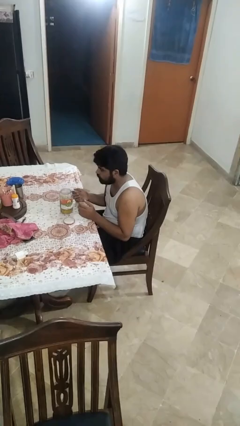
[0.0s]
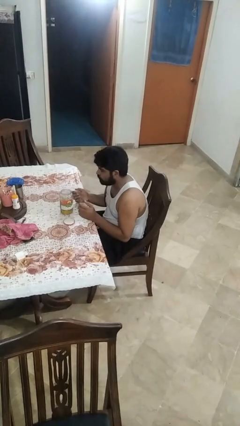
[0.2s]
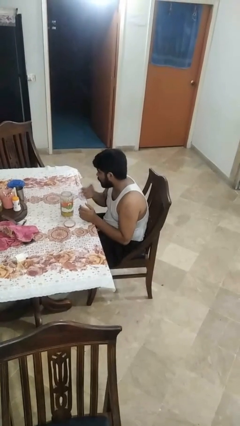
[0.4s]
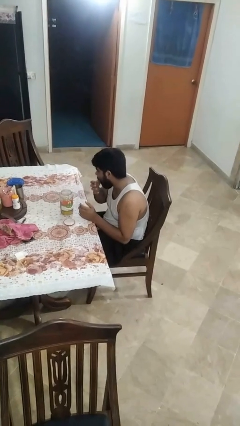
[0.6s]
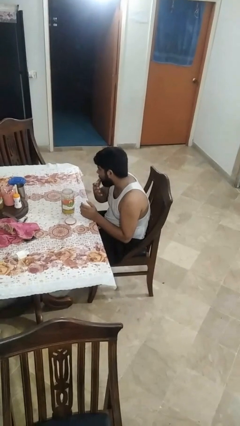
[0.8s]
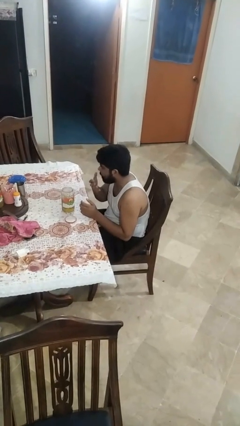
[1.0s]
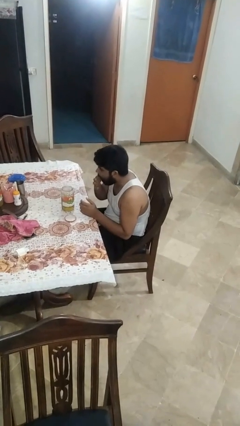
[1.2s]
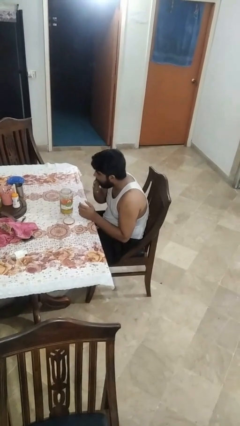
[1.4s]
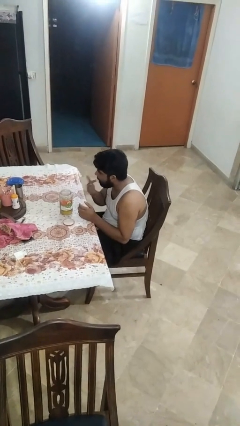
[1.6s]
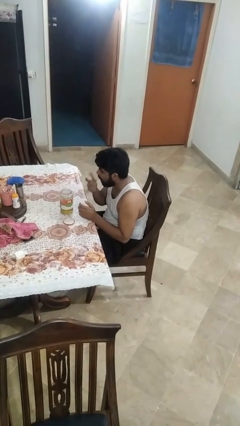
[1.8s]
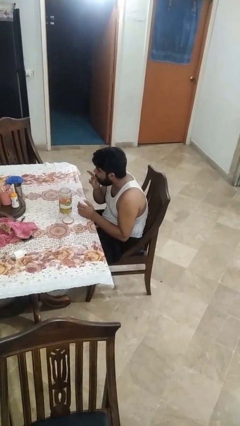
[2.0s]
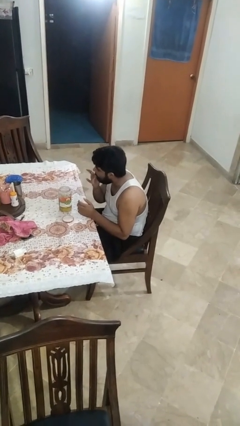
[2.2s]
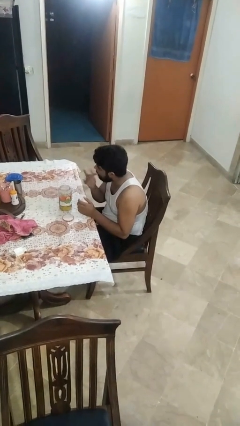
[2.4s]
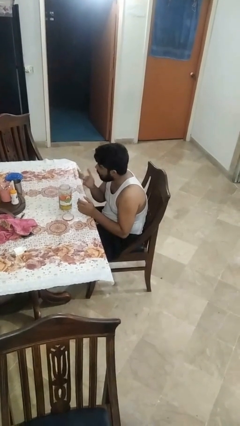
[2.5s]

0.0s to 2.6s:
person licks fingers

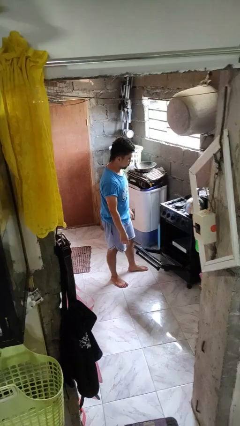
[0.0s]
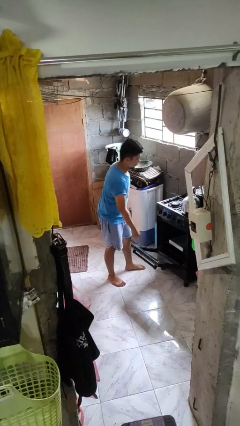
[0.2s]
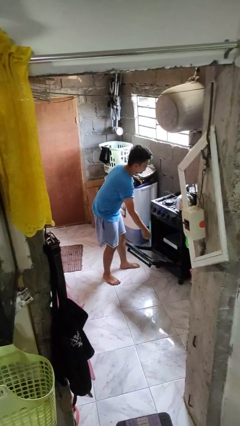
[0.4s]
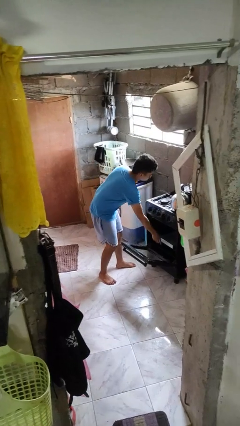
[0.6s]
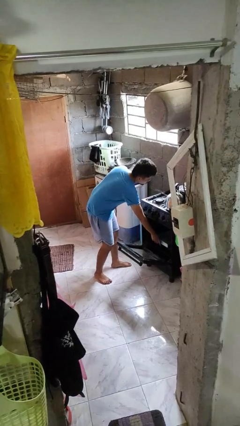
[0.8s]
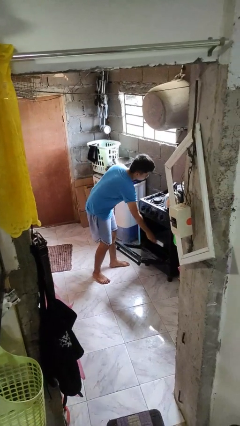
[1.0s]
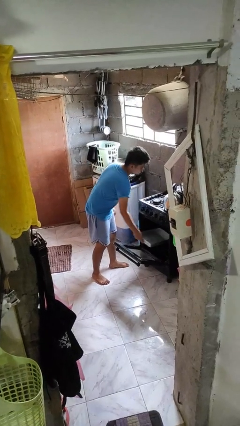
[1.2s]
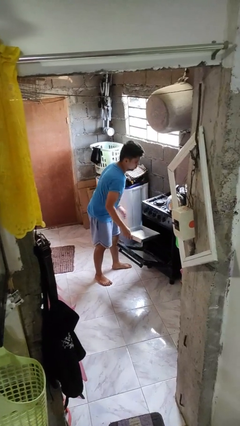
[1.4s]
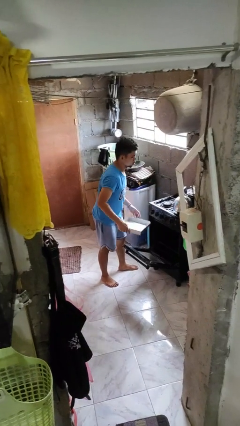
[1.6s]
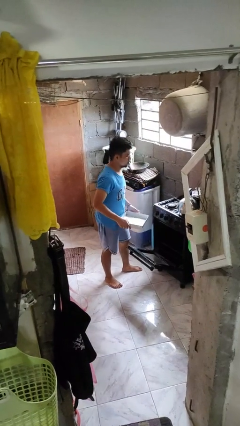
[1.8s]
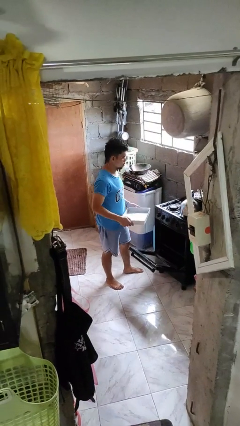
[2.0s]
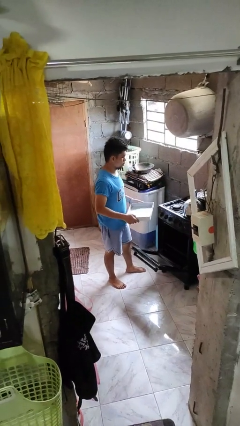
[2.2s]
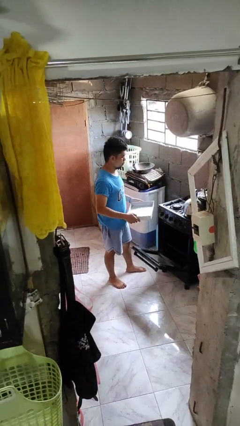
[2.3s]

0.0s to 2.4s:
person takes object from oven

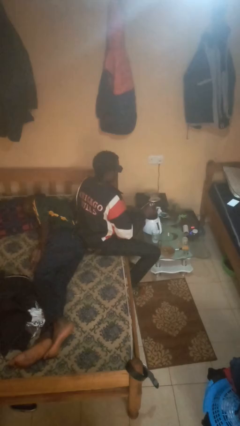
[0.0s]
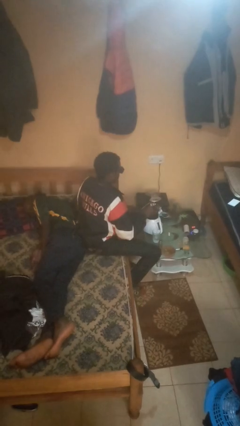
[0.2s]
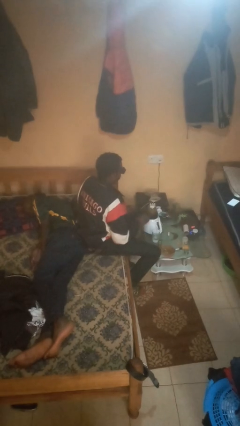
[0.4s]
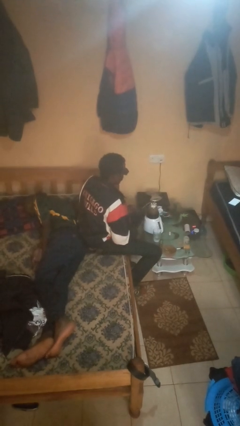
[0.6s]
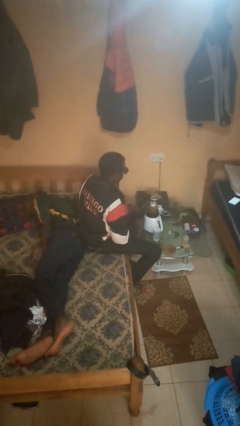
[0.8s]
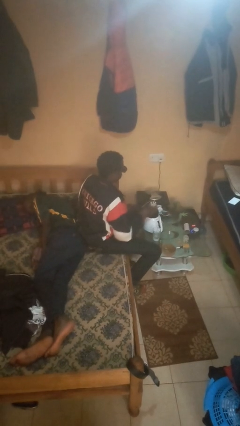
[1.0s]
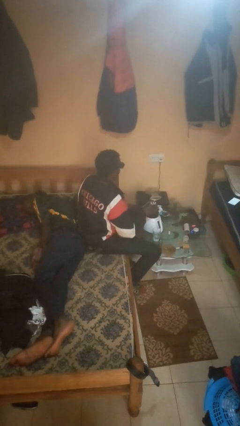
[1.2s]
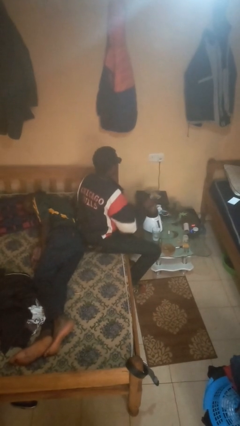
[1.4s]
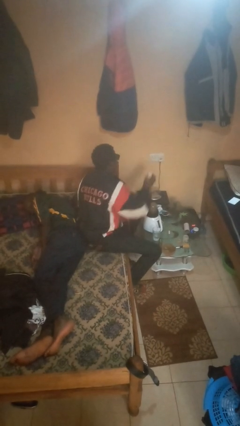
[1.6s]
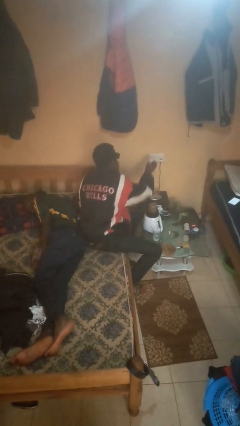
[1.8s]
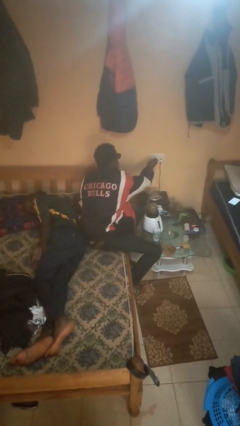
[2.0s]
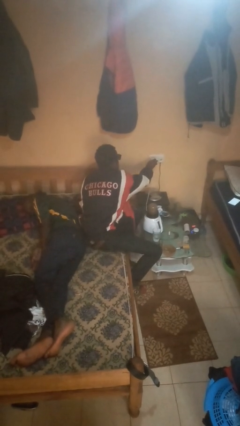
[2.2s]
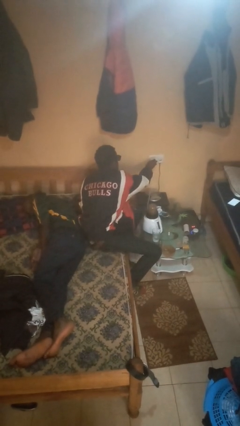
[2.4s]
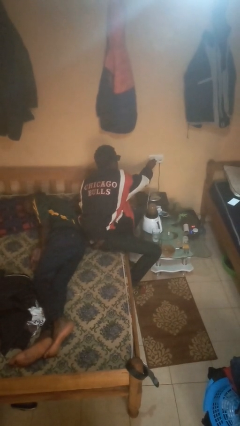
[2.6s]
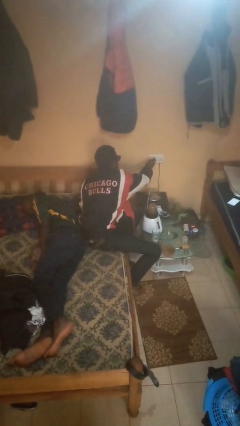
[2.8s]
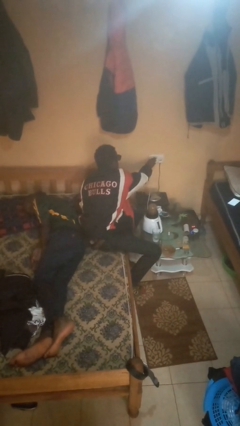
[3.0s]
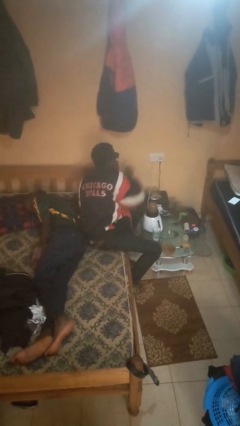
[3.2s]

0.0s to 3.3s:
person plugs into electrical socket

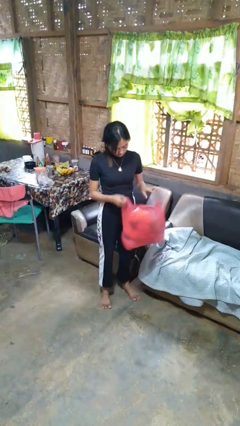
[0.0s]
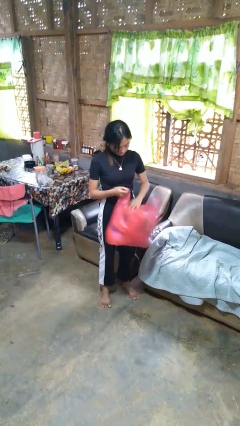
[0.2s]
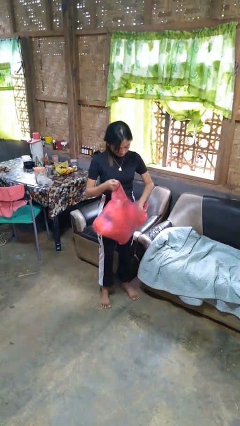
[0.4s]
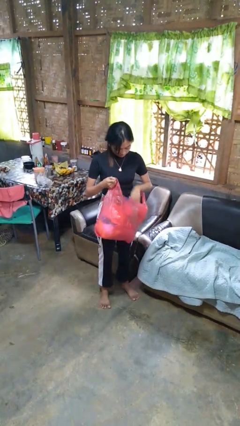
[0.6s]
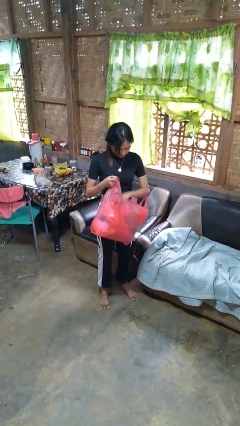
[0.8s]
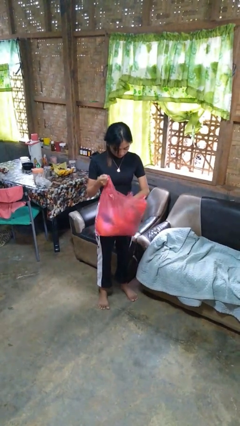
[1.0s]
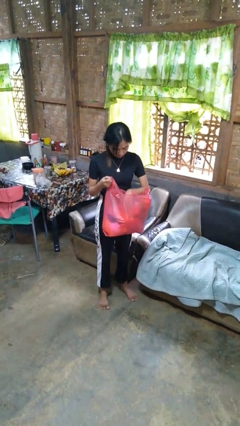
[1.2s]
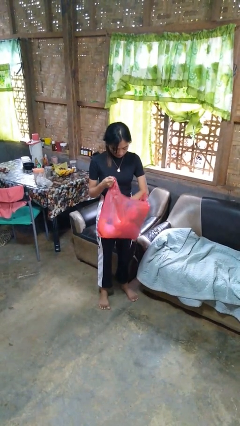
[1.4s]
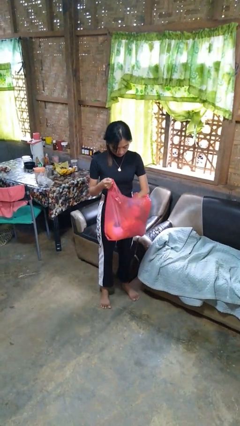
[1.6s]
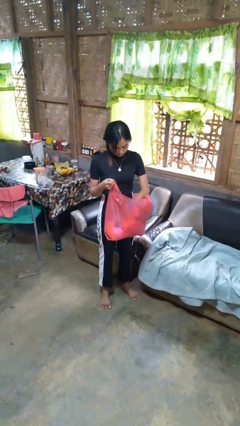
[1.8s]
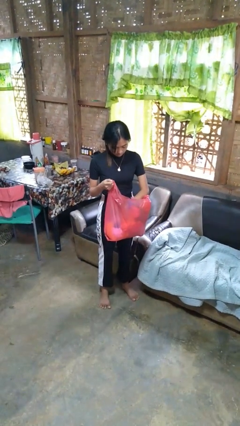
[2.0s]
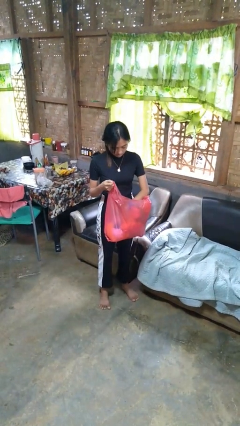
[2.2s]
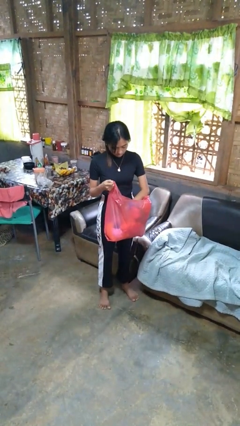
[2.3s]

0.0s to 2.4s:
person searches in bag

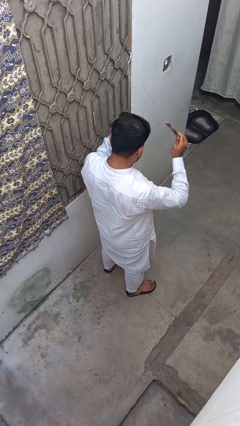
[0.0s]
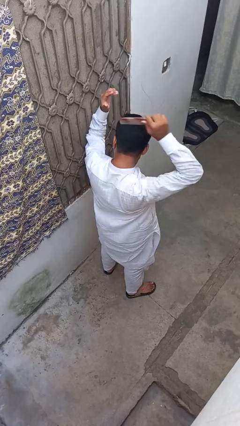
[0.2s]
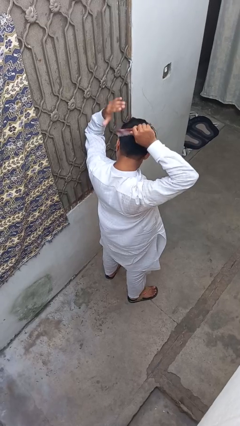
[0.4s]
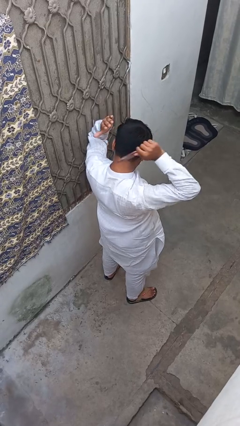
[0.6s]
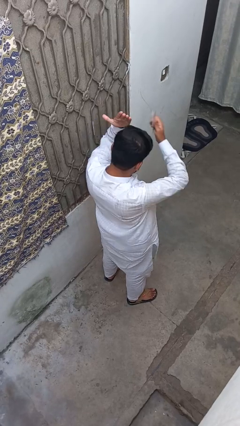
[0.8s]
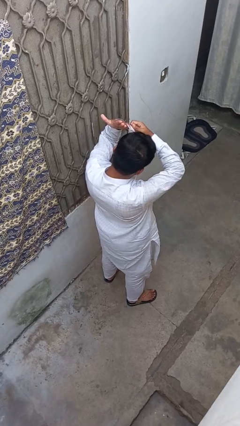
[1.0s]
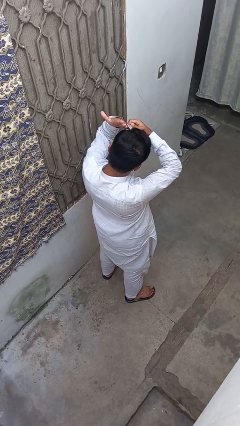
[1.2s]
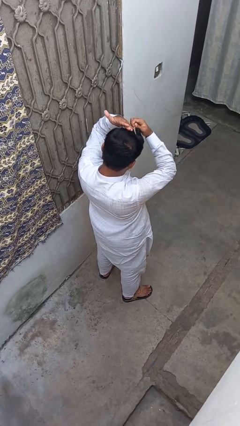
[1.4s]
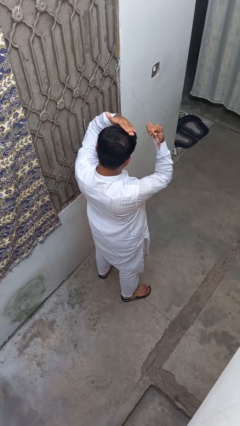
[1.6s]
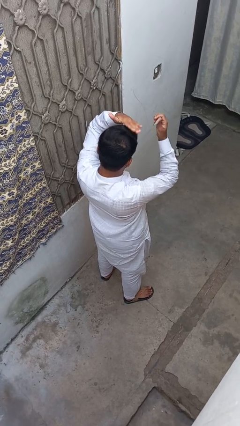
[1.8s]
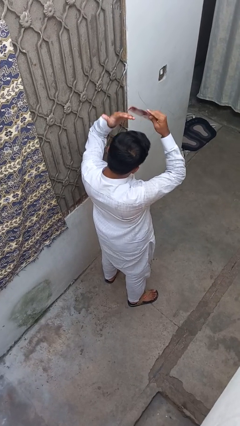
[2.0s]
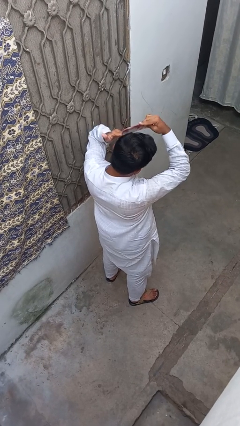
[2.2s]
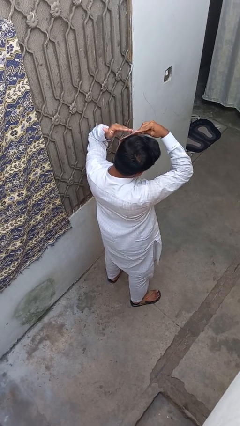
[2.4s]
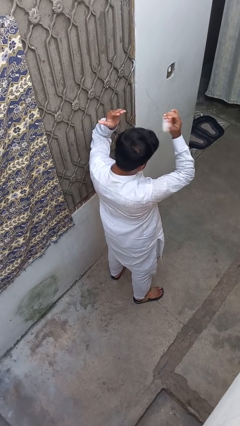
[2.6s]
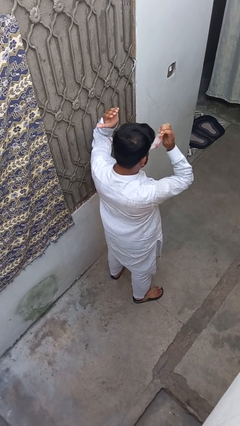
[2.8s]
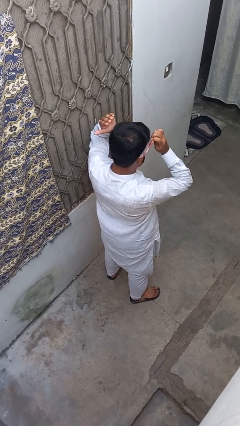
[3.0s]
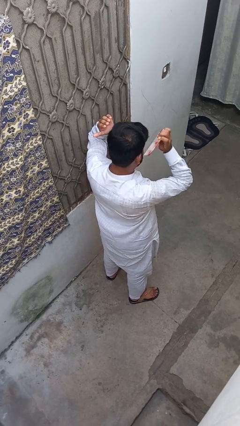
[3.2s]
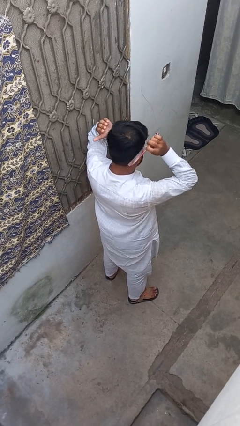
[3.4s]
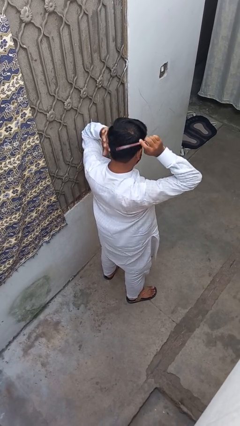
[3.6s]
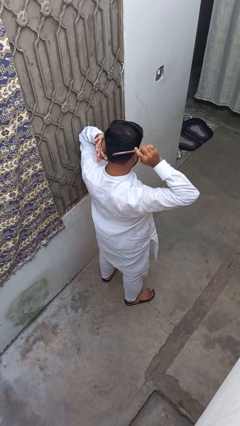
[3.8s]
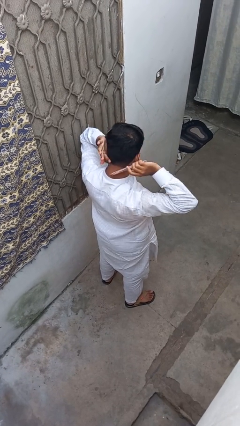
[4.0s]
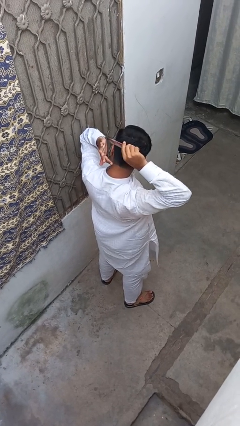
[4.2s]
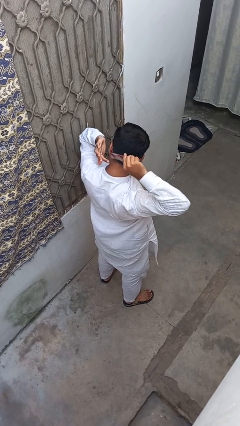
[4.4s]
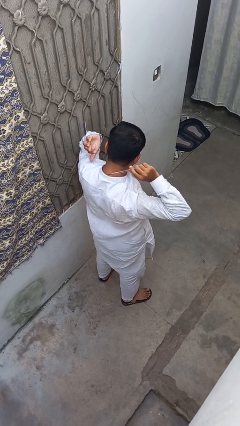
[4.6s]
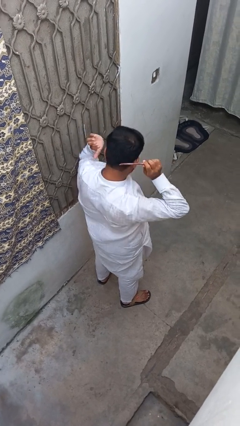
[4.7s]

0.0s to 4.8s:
person brushes hair

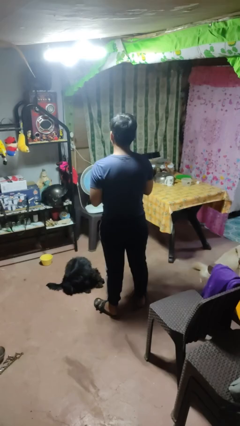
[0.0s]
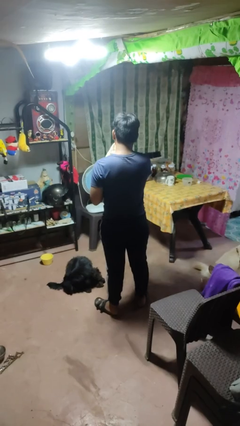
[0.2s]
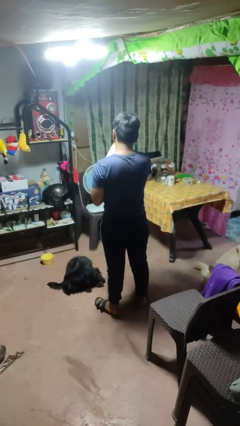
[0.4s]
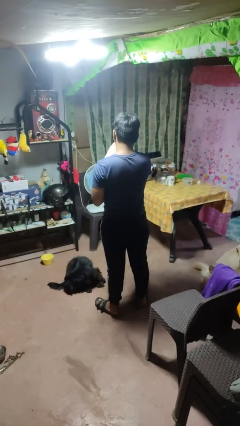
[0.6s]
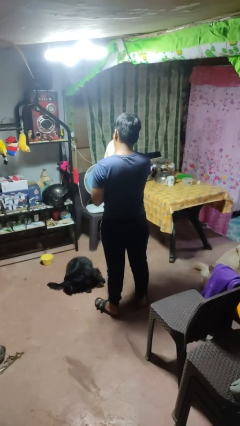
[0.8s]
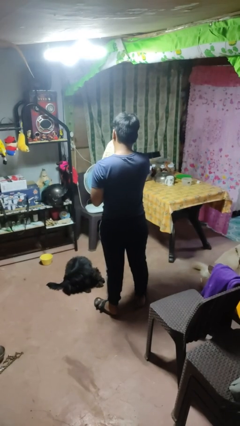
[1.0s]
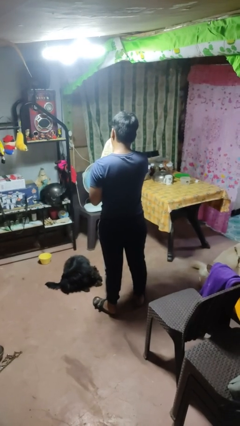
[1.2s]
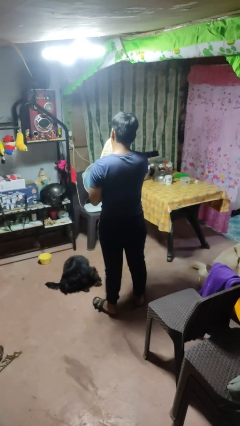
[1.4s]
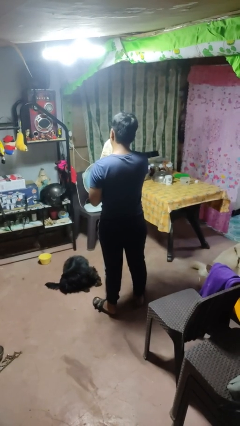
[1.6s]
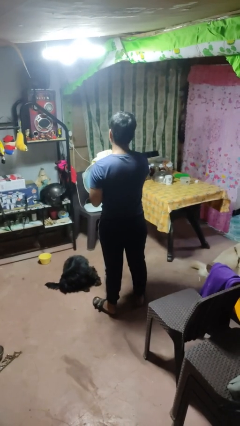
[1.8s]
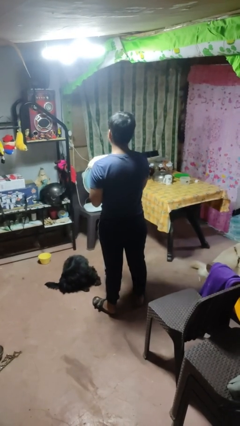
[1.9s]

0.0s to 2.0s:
person blows nose

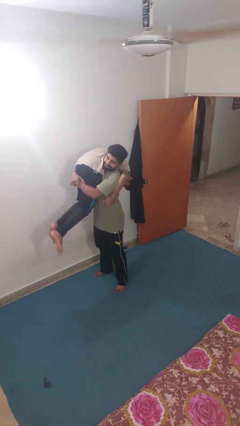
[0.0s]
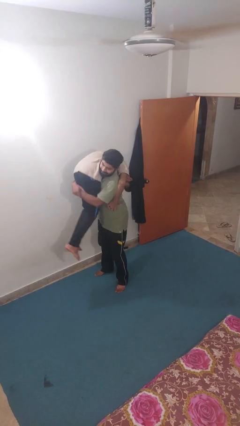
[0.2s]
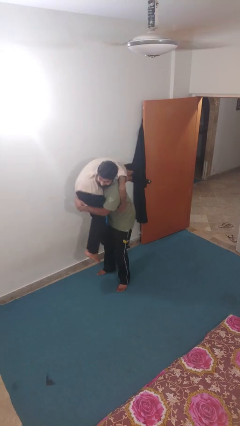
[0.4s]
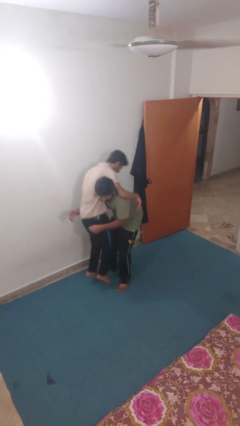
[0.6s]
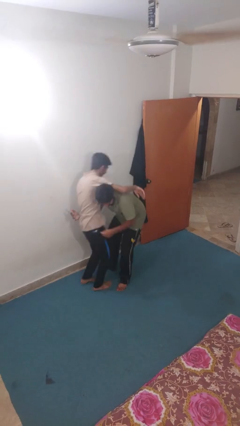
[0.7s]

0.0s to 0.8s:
person puts down person
